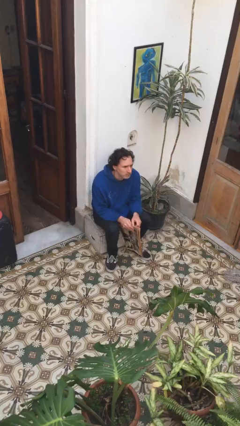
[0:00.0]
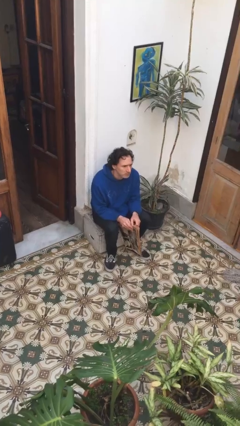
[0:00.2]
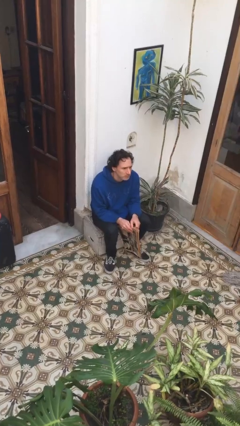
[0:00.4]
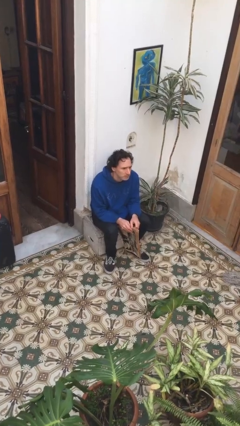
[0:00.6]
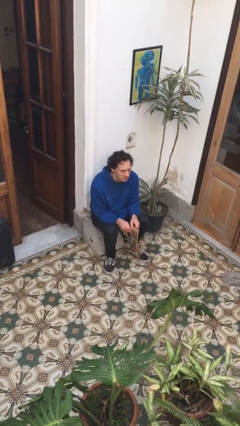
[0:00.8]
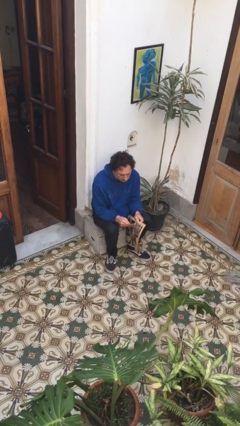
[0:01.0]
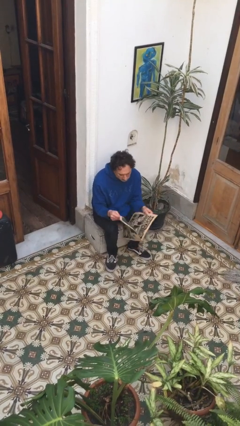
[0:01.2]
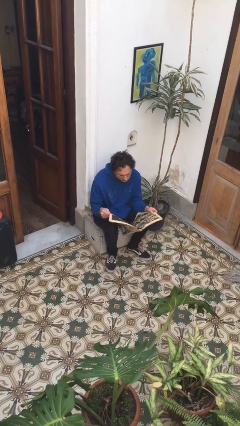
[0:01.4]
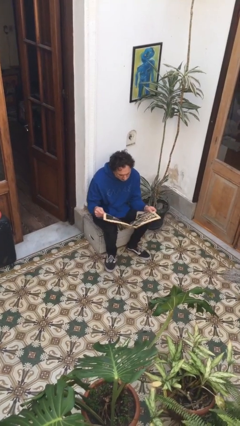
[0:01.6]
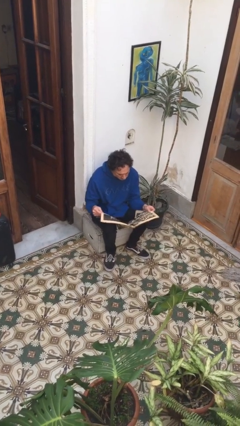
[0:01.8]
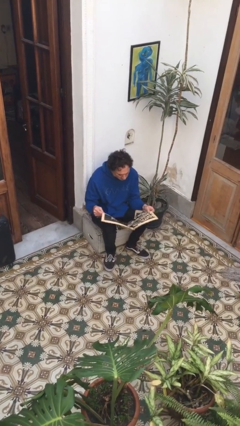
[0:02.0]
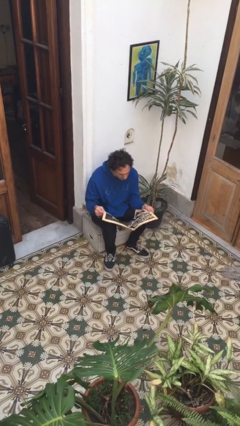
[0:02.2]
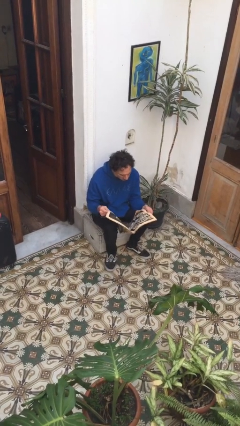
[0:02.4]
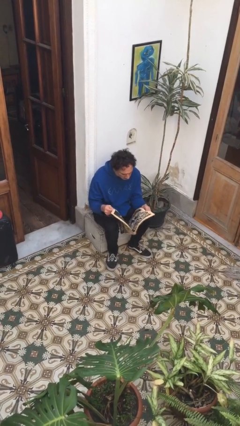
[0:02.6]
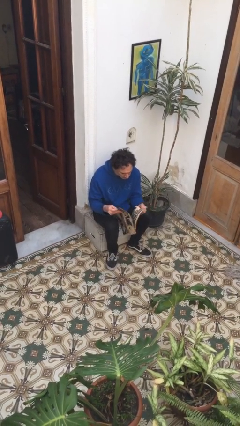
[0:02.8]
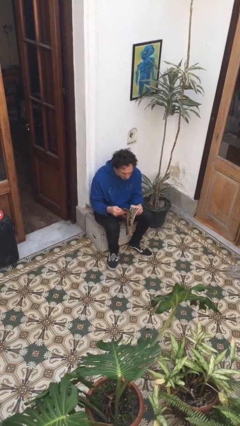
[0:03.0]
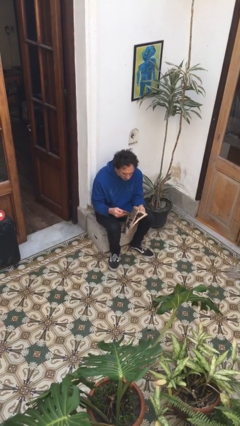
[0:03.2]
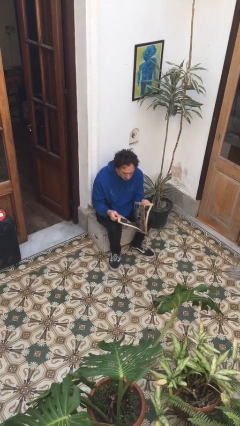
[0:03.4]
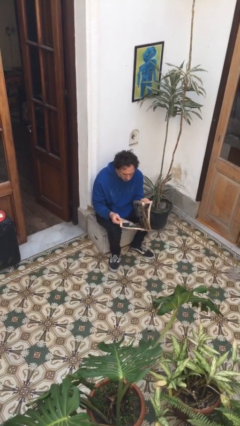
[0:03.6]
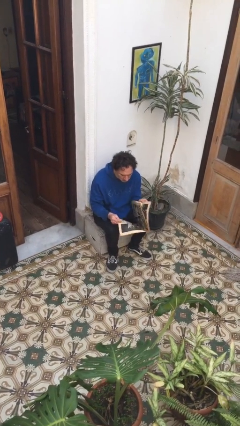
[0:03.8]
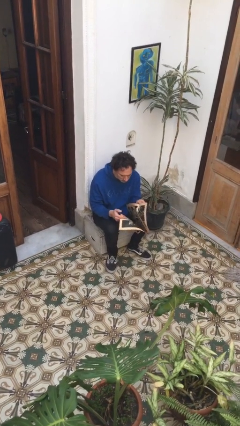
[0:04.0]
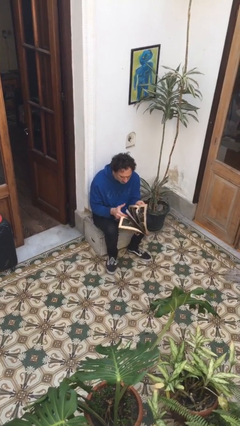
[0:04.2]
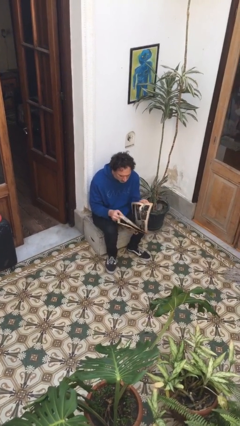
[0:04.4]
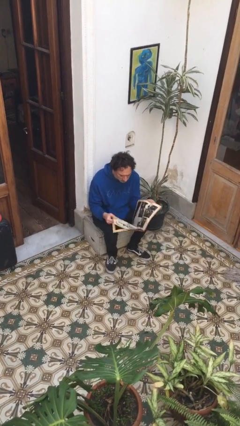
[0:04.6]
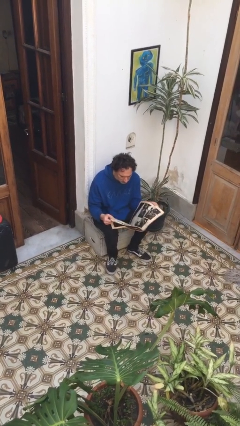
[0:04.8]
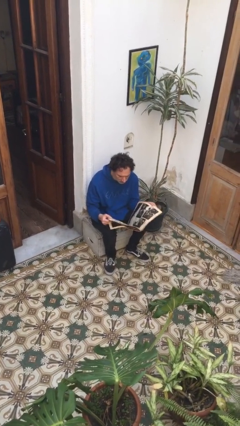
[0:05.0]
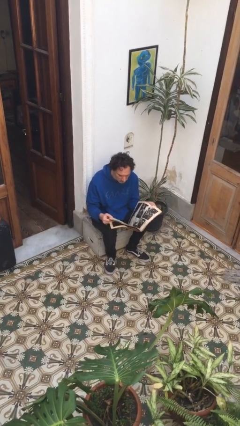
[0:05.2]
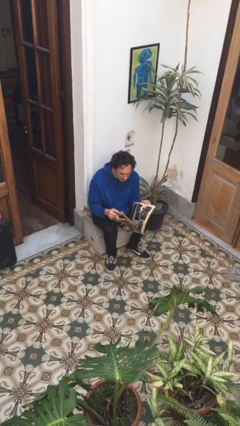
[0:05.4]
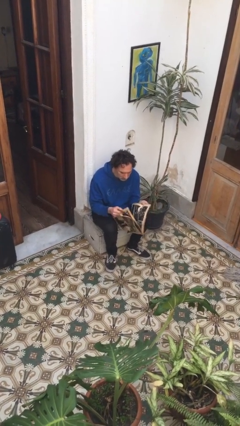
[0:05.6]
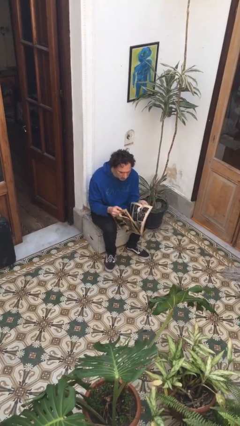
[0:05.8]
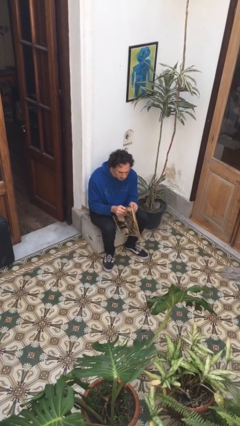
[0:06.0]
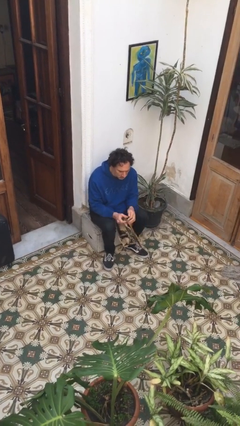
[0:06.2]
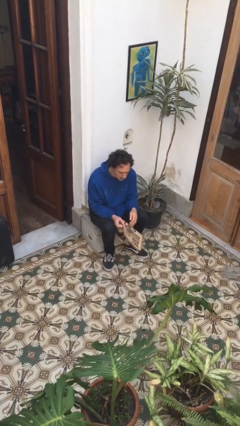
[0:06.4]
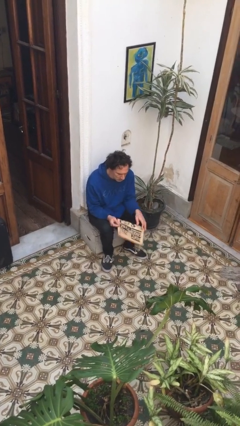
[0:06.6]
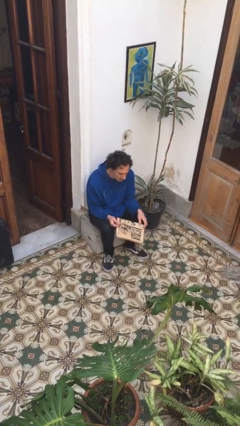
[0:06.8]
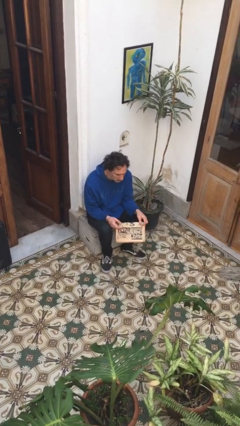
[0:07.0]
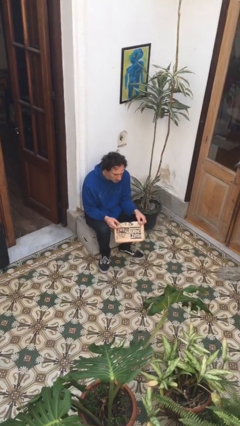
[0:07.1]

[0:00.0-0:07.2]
person reads newspaper

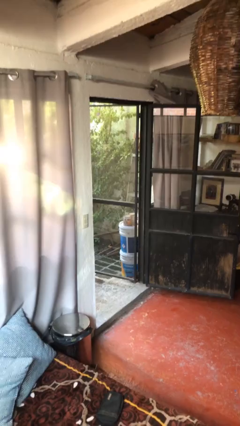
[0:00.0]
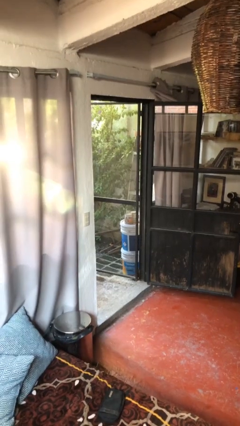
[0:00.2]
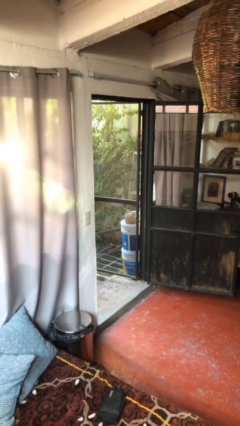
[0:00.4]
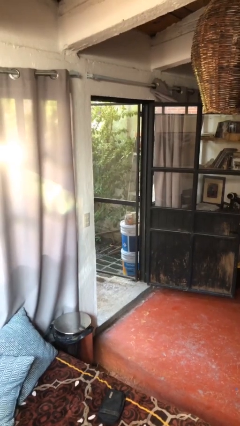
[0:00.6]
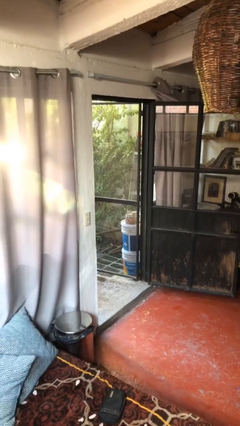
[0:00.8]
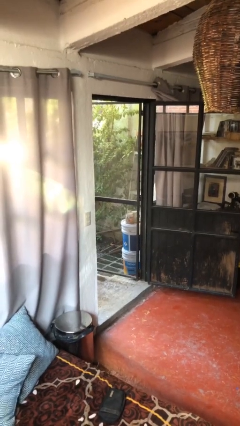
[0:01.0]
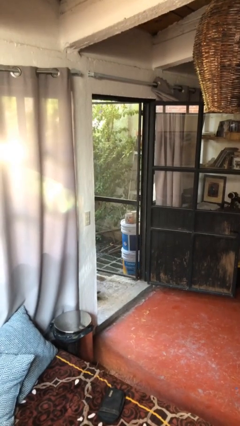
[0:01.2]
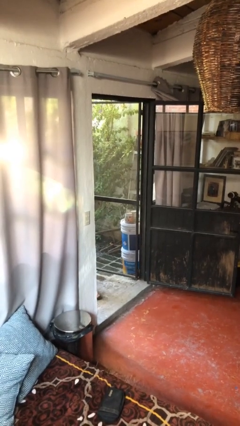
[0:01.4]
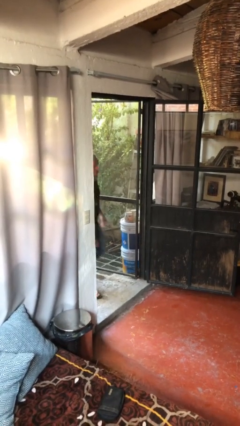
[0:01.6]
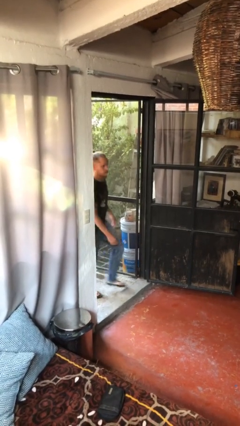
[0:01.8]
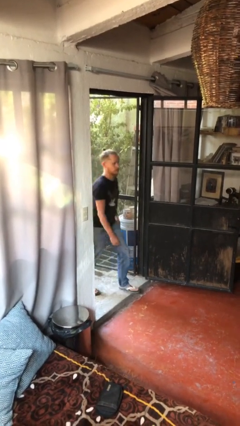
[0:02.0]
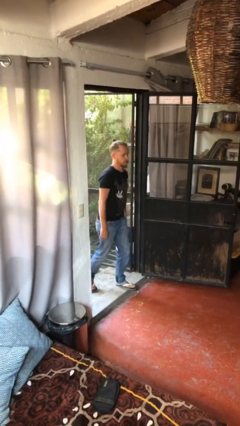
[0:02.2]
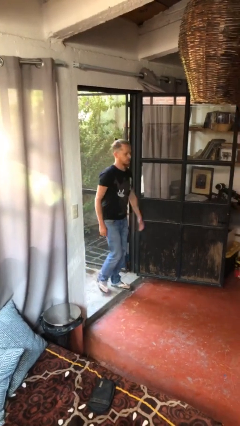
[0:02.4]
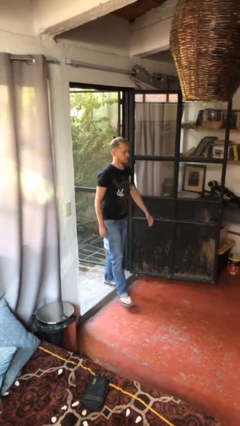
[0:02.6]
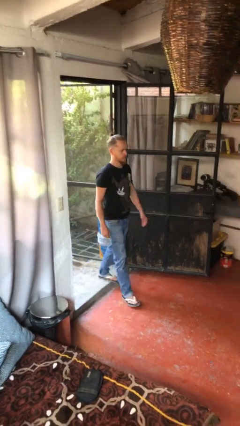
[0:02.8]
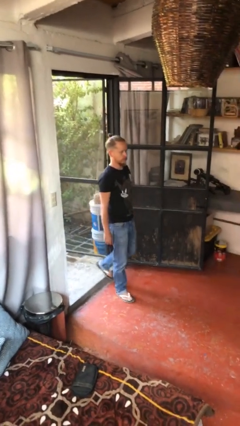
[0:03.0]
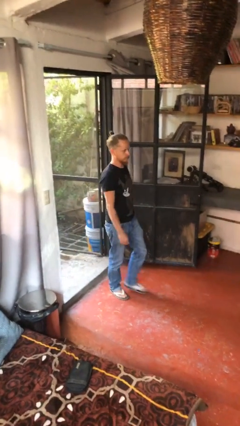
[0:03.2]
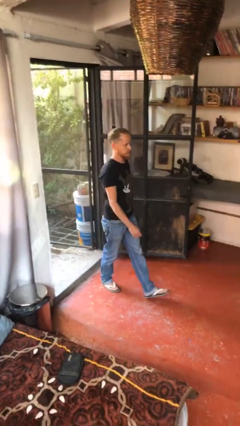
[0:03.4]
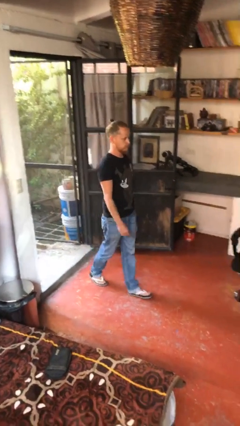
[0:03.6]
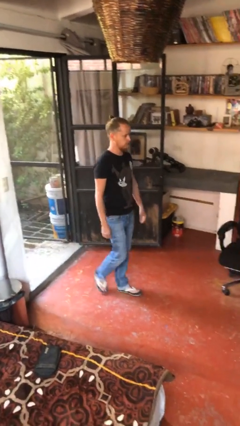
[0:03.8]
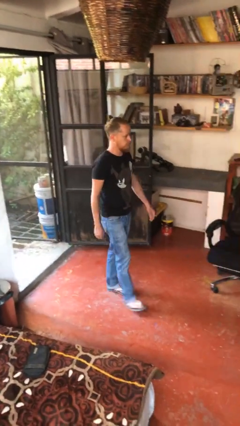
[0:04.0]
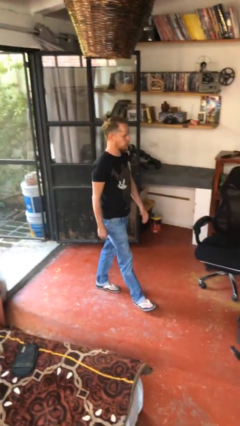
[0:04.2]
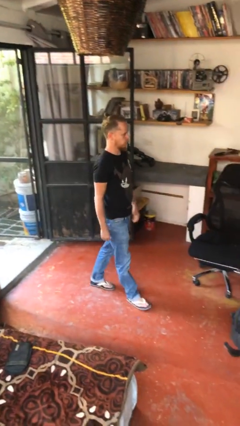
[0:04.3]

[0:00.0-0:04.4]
person enters scene through structure

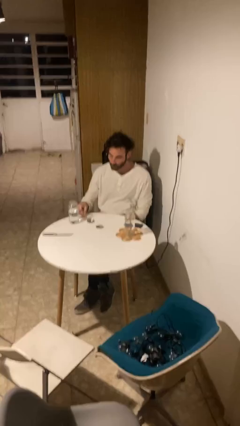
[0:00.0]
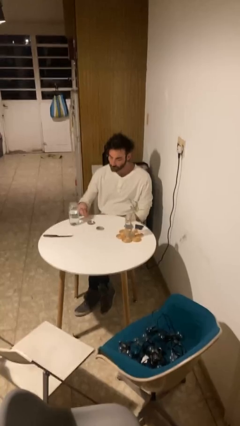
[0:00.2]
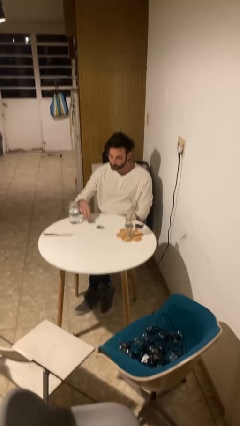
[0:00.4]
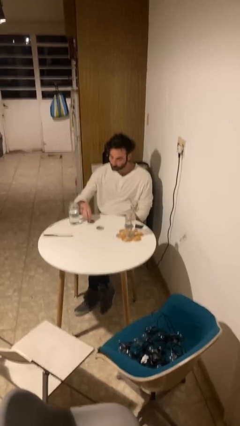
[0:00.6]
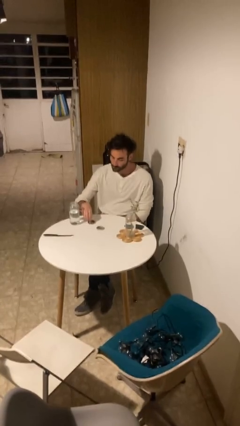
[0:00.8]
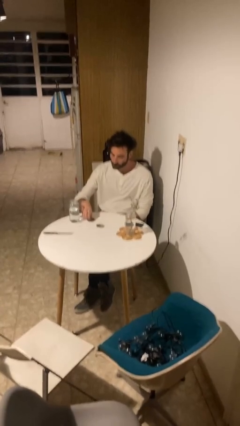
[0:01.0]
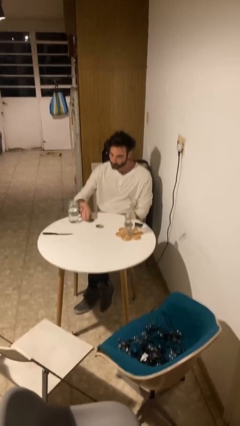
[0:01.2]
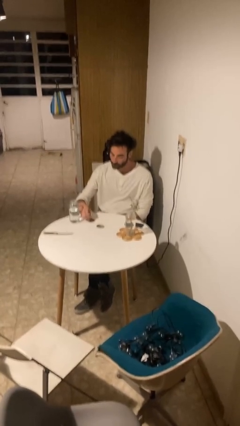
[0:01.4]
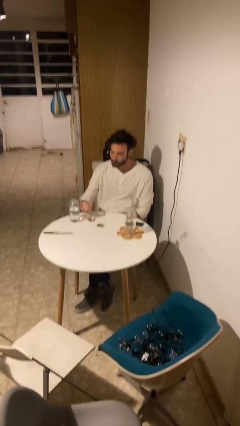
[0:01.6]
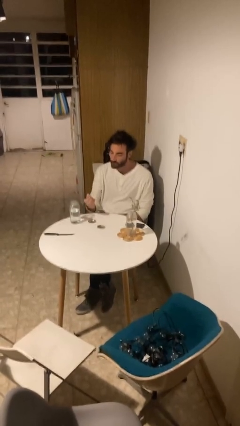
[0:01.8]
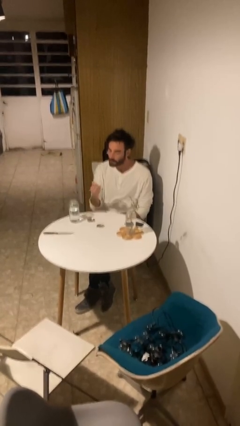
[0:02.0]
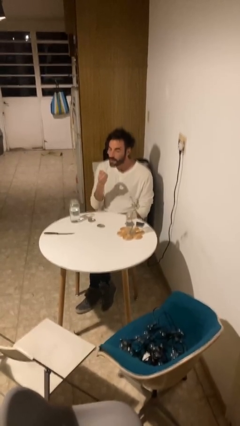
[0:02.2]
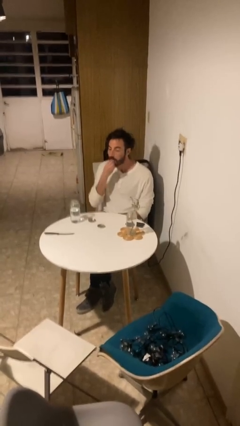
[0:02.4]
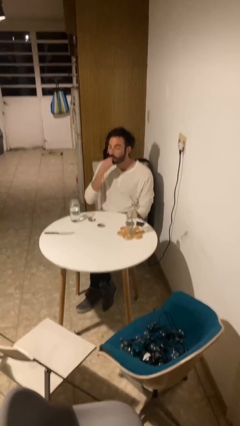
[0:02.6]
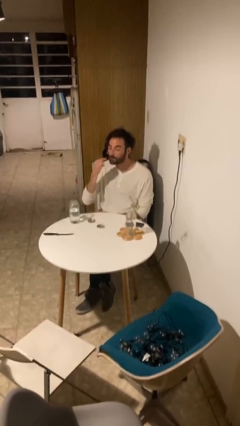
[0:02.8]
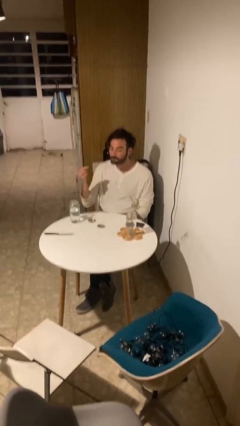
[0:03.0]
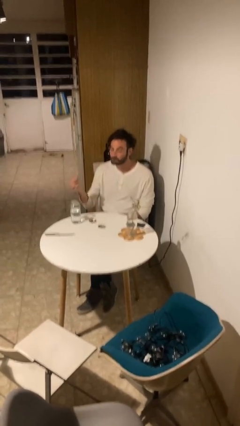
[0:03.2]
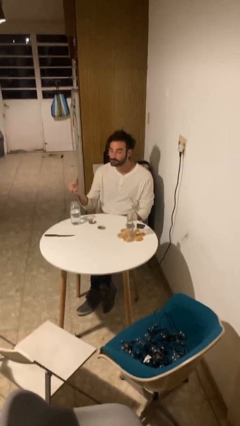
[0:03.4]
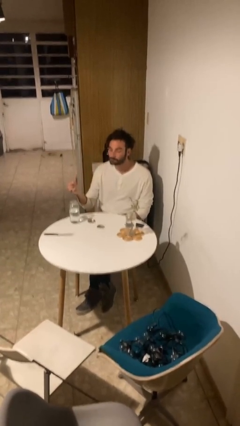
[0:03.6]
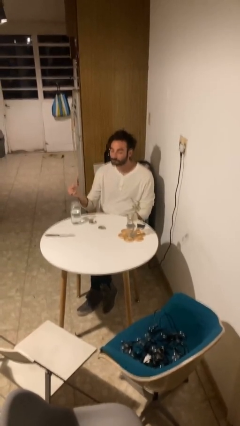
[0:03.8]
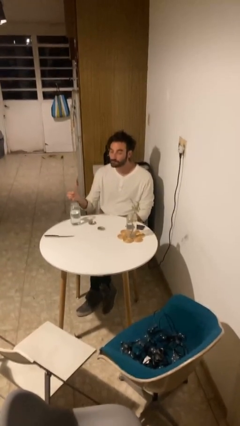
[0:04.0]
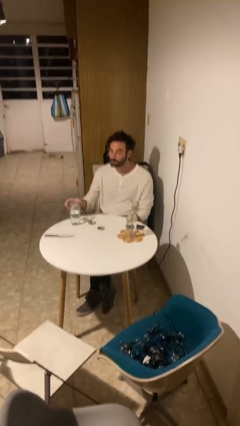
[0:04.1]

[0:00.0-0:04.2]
person takes medicine pills

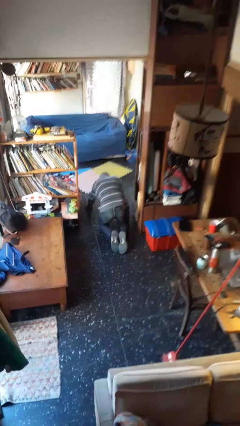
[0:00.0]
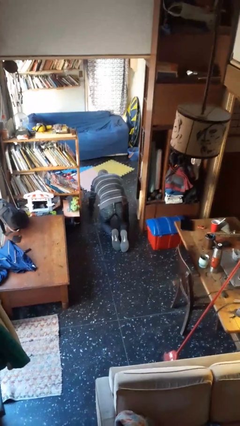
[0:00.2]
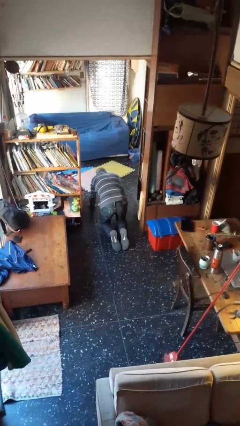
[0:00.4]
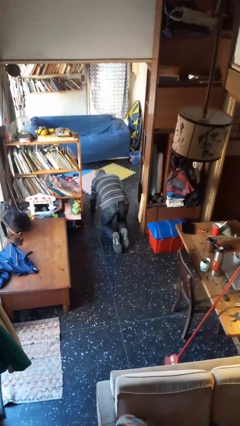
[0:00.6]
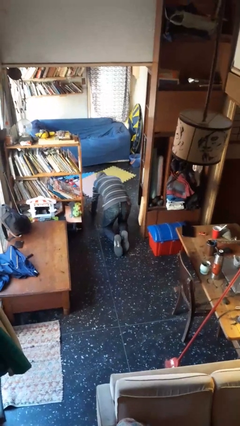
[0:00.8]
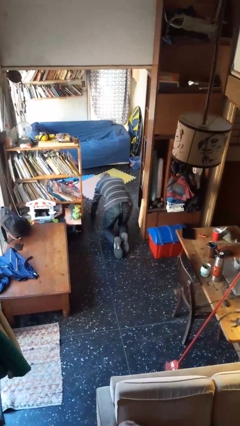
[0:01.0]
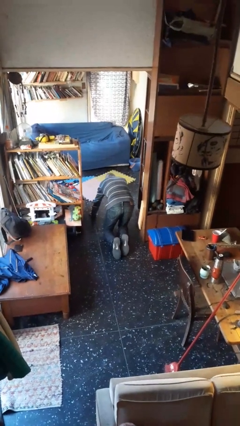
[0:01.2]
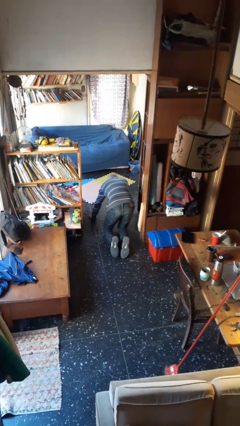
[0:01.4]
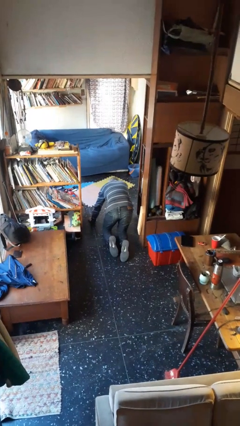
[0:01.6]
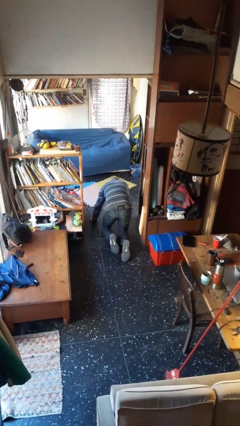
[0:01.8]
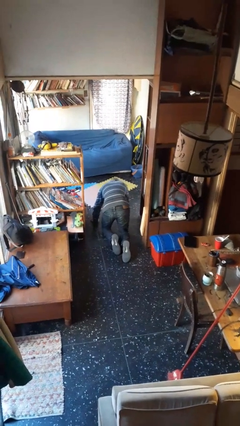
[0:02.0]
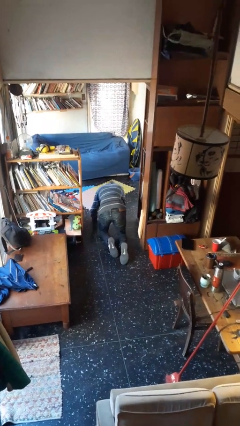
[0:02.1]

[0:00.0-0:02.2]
person crawls
